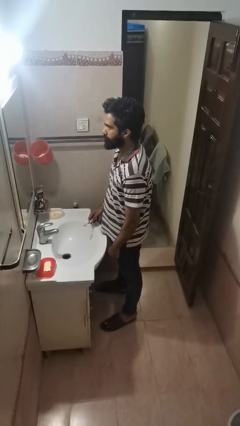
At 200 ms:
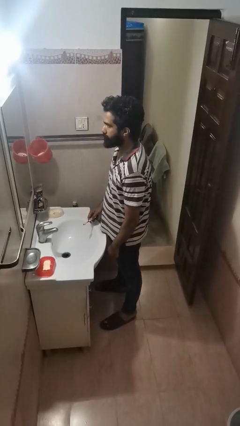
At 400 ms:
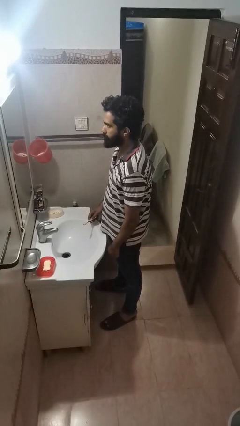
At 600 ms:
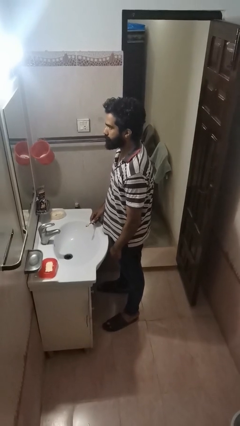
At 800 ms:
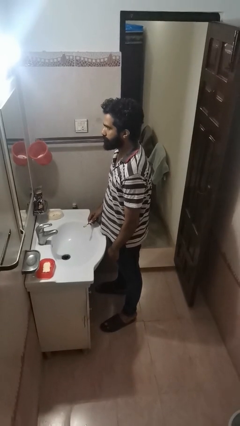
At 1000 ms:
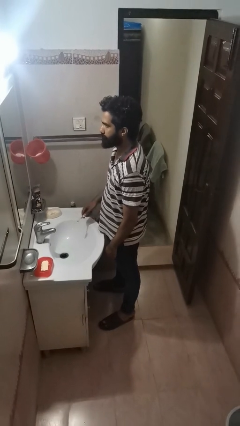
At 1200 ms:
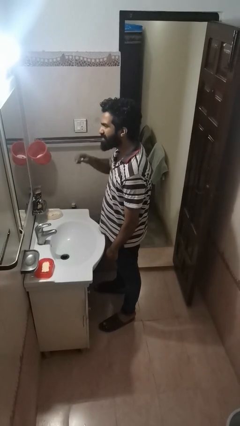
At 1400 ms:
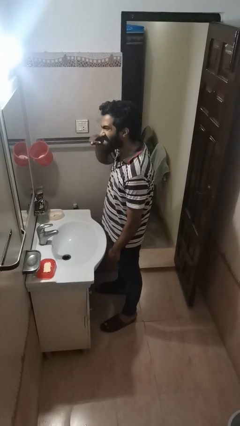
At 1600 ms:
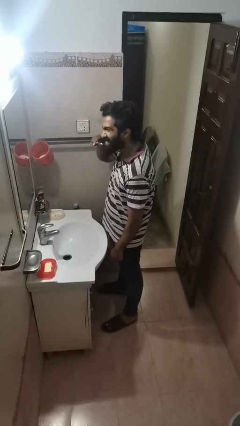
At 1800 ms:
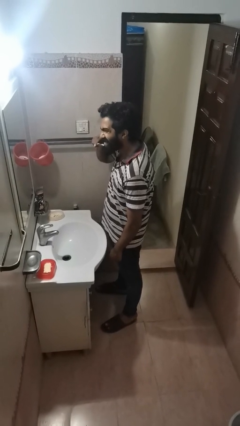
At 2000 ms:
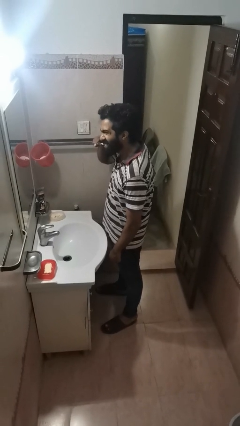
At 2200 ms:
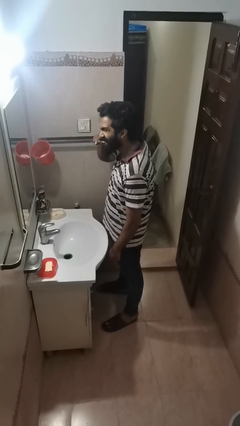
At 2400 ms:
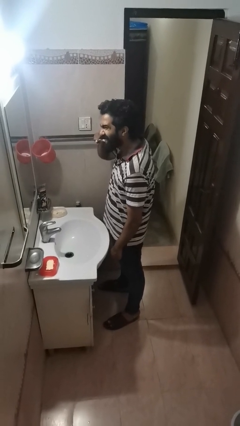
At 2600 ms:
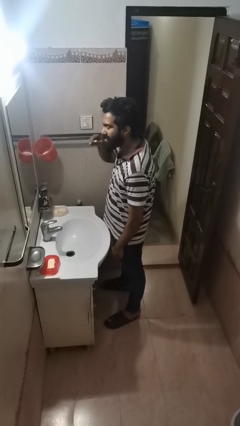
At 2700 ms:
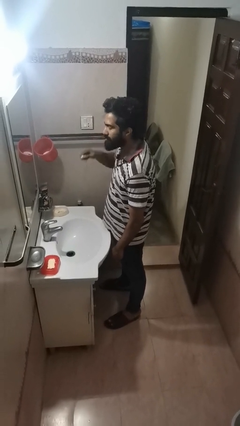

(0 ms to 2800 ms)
person brushes teeth

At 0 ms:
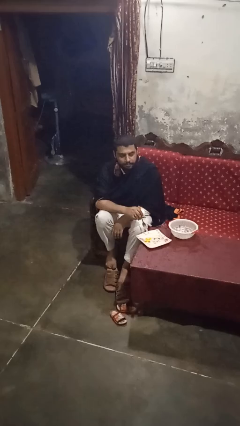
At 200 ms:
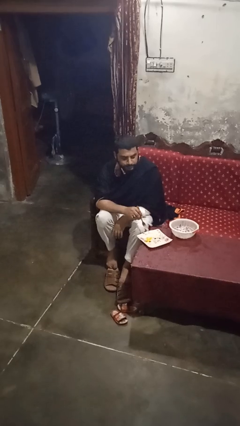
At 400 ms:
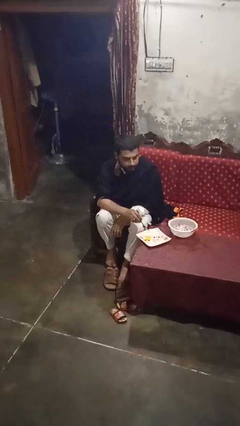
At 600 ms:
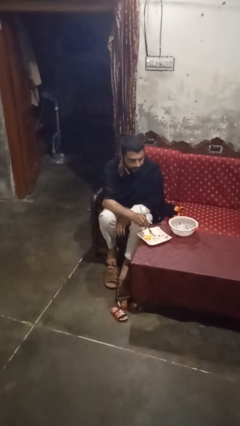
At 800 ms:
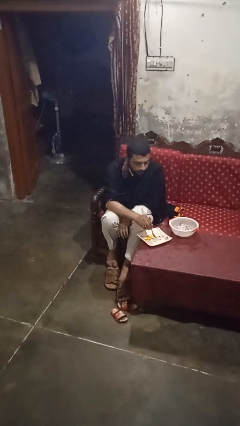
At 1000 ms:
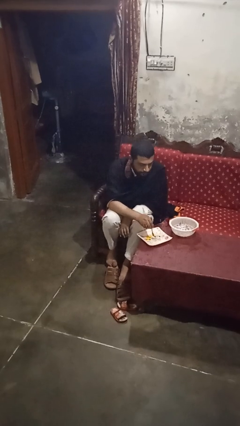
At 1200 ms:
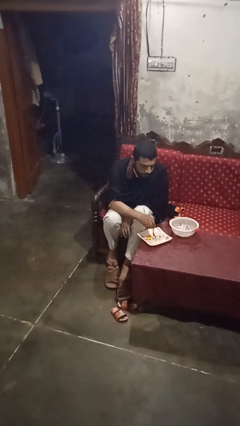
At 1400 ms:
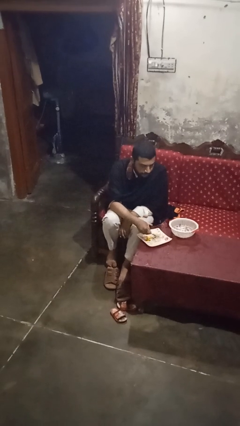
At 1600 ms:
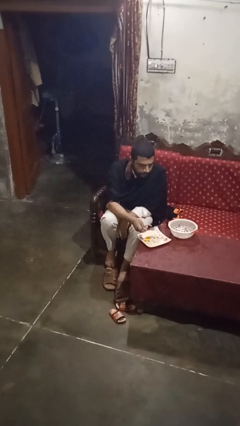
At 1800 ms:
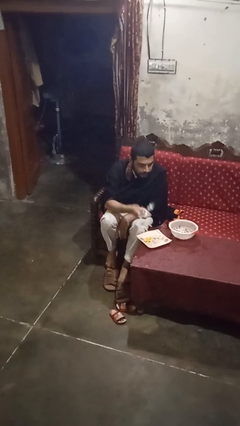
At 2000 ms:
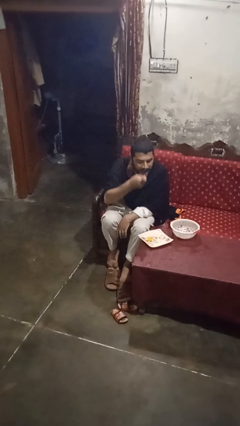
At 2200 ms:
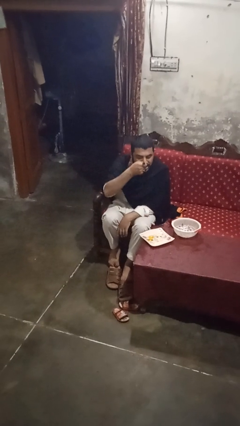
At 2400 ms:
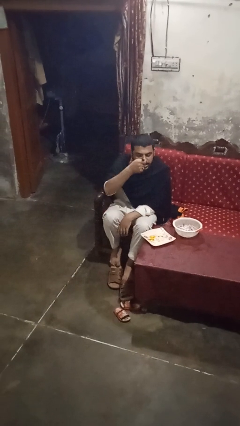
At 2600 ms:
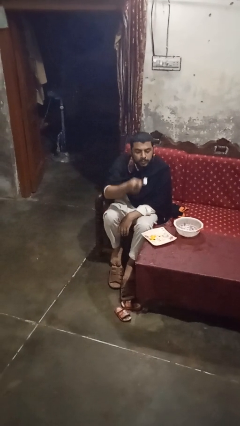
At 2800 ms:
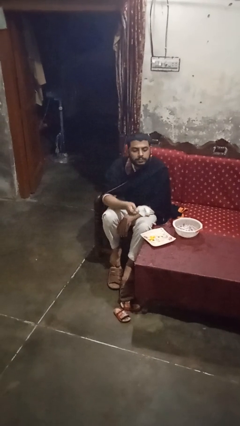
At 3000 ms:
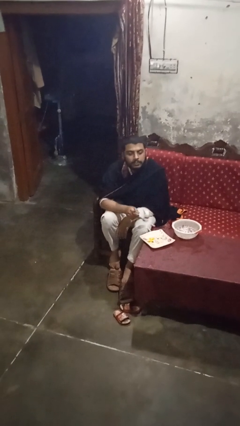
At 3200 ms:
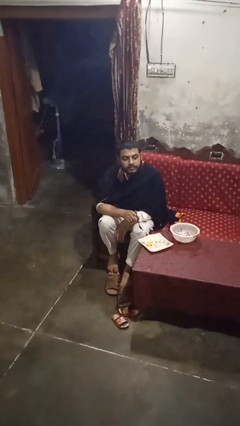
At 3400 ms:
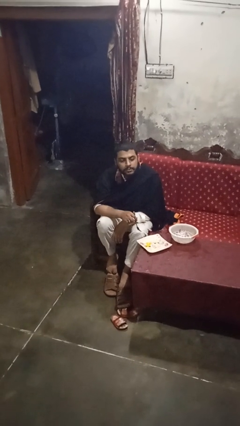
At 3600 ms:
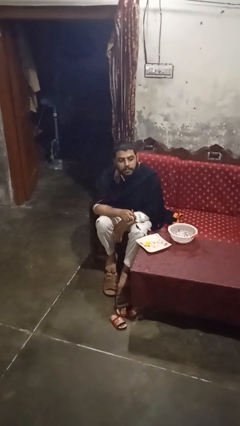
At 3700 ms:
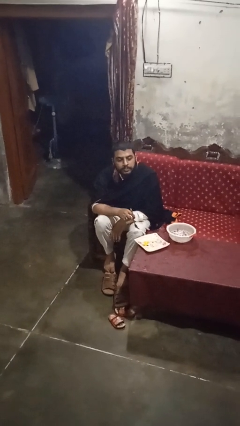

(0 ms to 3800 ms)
person eats with utensil

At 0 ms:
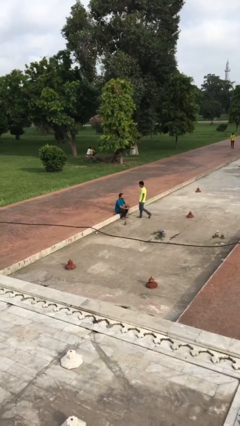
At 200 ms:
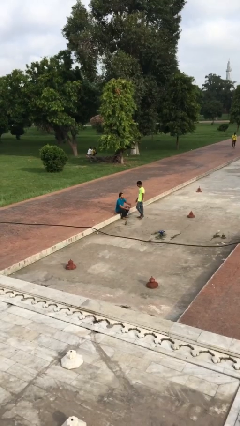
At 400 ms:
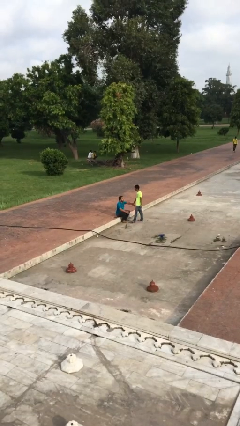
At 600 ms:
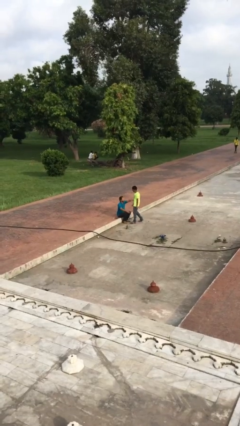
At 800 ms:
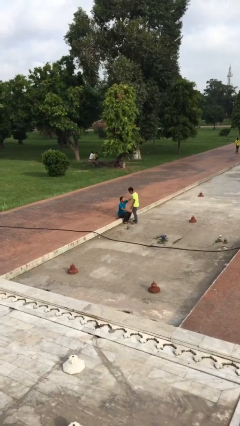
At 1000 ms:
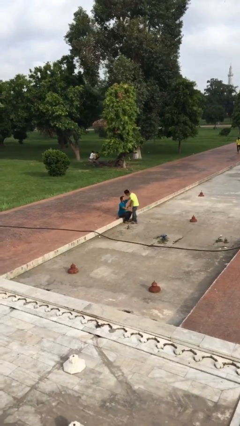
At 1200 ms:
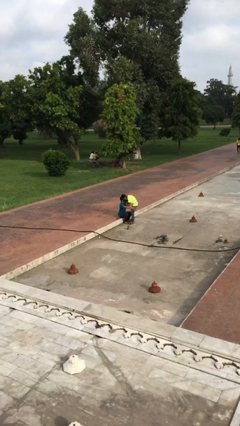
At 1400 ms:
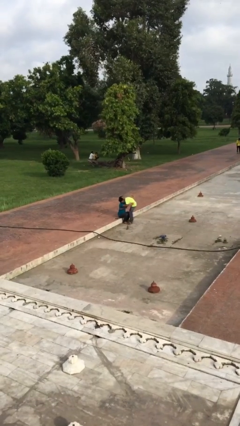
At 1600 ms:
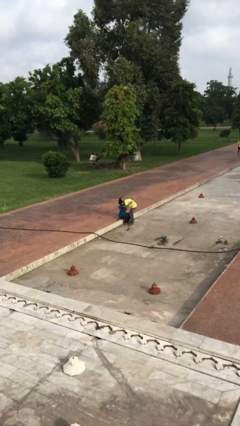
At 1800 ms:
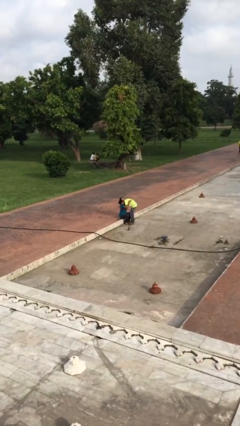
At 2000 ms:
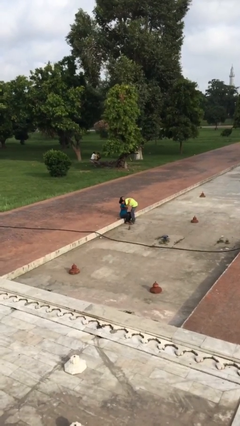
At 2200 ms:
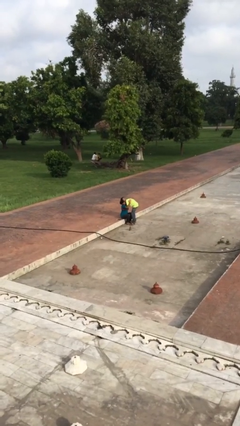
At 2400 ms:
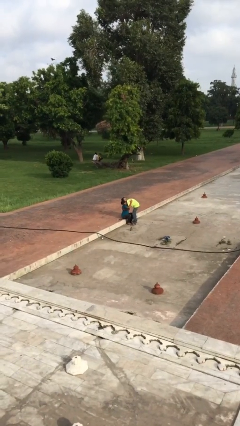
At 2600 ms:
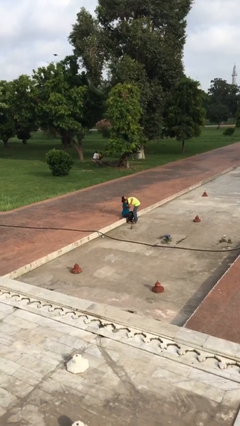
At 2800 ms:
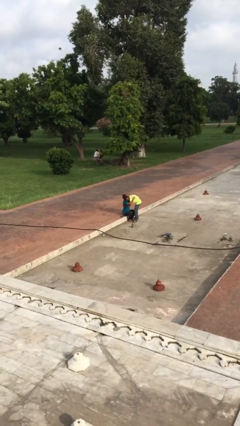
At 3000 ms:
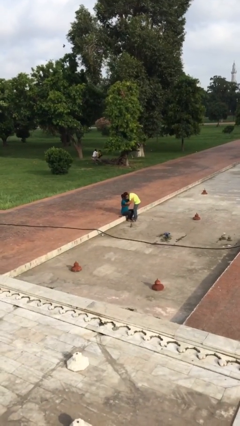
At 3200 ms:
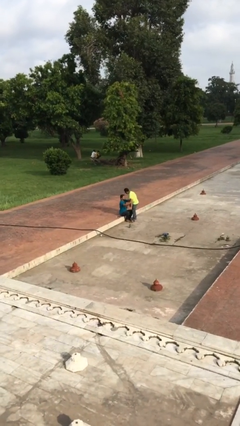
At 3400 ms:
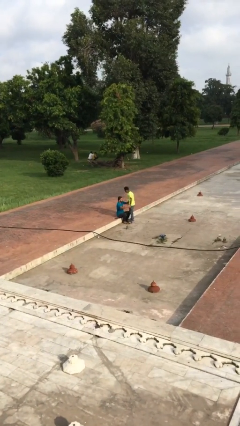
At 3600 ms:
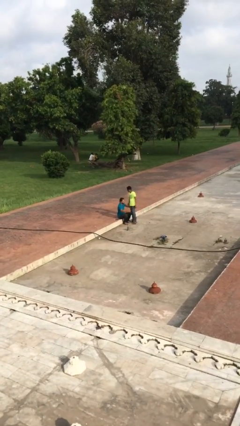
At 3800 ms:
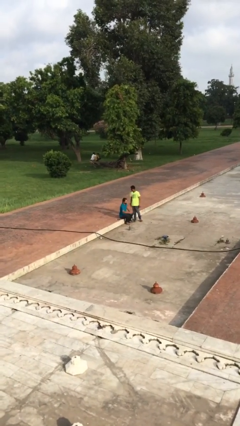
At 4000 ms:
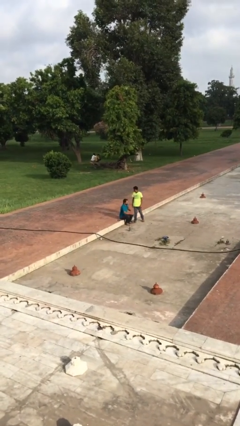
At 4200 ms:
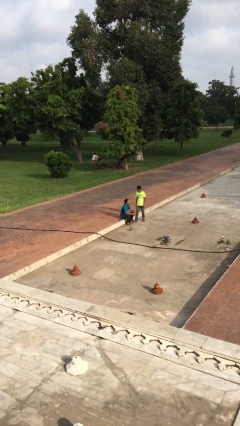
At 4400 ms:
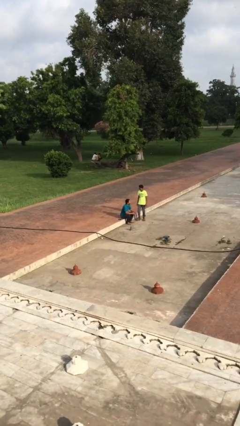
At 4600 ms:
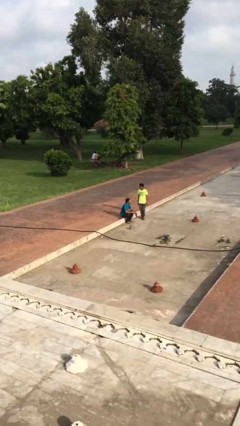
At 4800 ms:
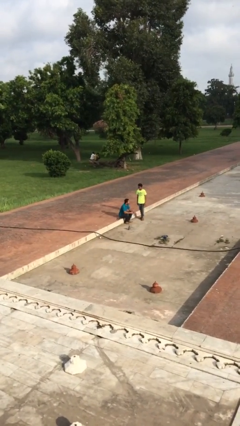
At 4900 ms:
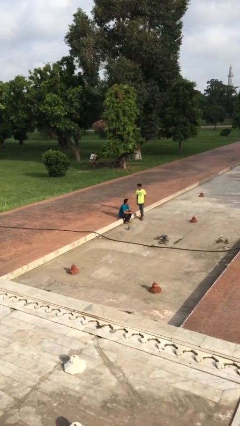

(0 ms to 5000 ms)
person embraces person

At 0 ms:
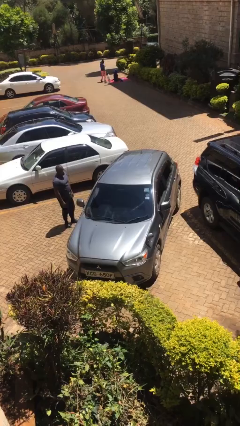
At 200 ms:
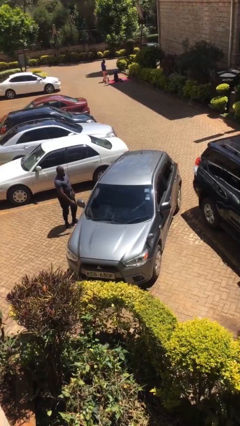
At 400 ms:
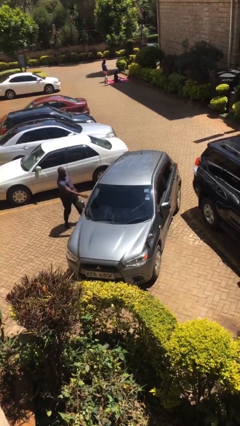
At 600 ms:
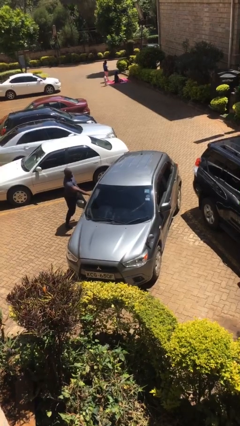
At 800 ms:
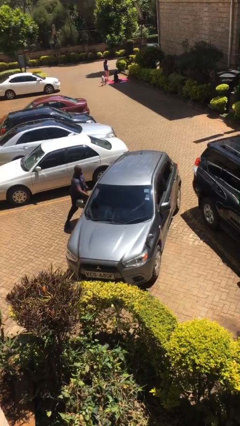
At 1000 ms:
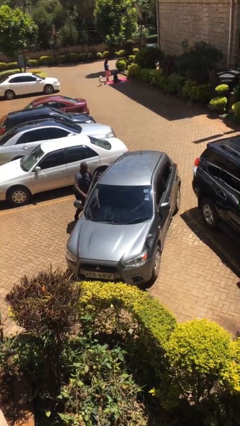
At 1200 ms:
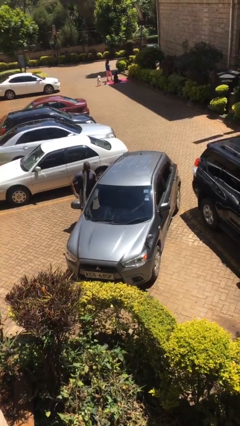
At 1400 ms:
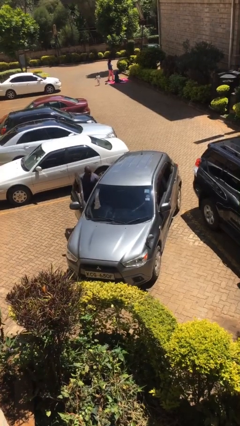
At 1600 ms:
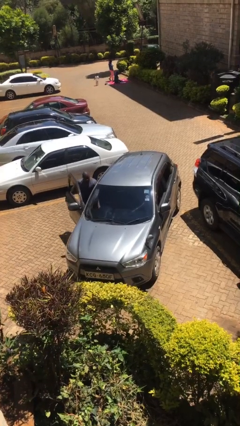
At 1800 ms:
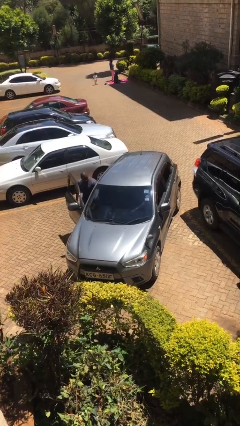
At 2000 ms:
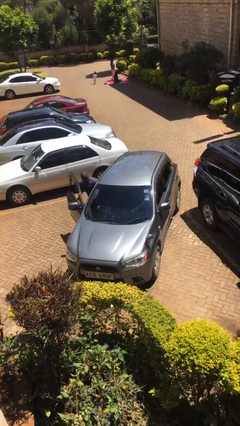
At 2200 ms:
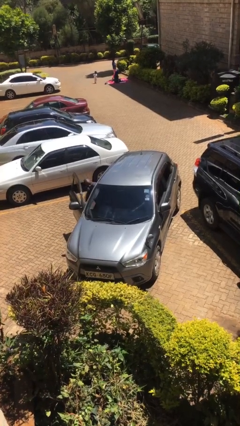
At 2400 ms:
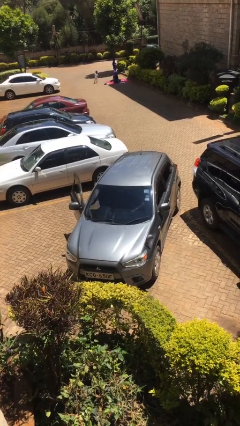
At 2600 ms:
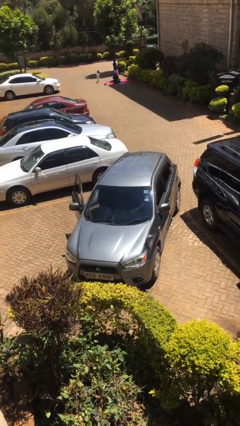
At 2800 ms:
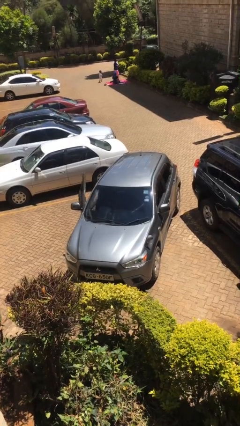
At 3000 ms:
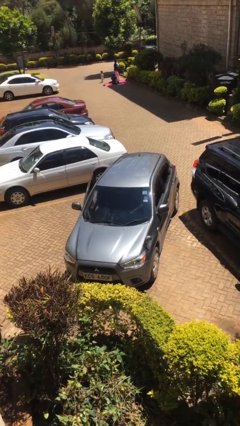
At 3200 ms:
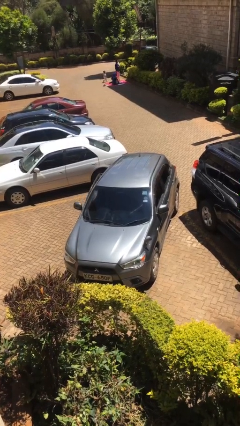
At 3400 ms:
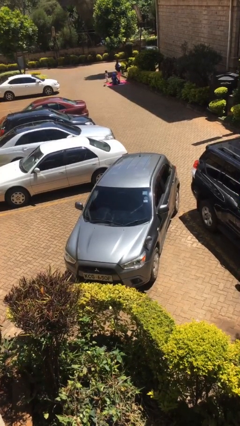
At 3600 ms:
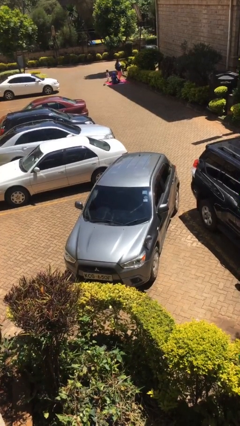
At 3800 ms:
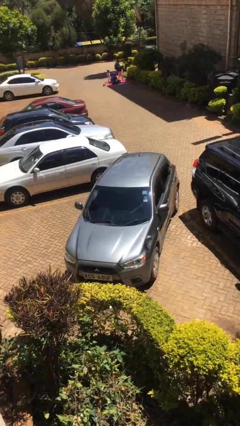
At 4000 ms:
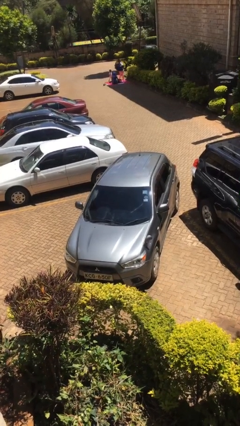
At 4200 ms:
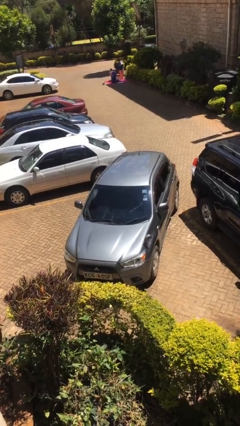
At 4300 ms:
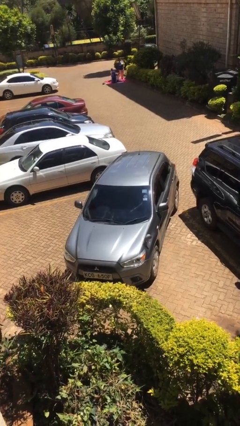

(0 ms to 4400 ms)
car picks up person

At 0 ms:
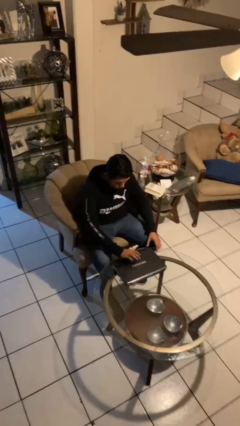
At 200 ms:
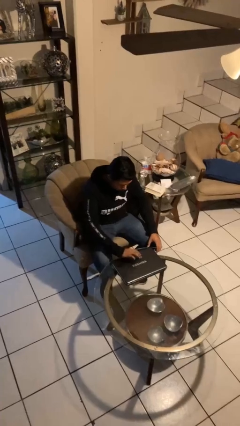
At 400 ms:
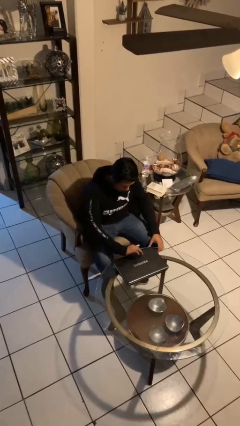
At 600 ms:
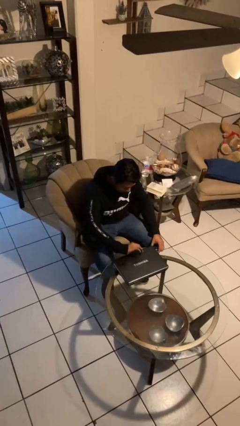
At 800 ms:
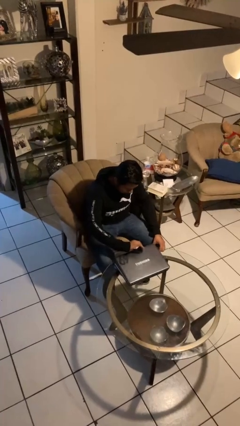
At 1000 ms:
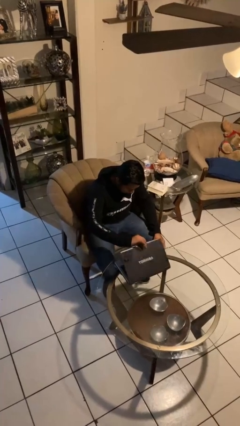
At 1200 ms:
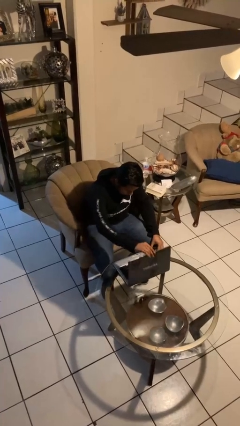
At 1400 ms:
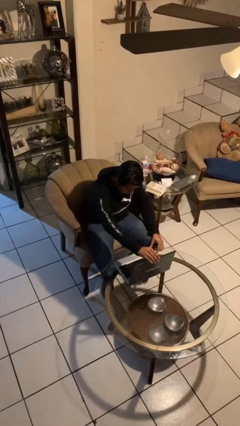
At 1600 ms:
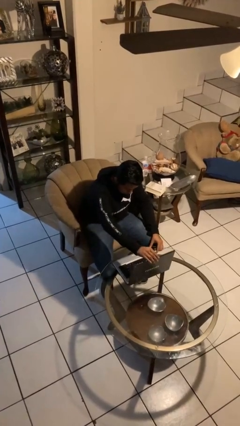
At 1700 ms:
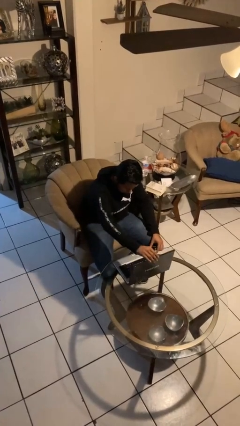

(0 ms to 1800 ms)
person opens laptop
